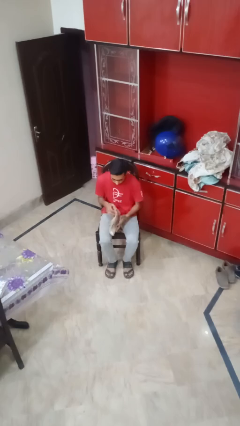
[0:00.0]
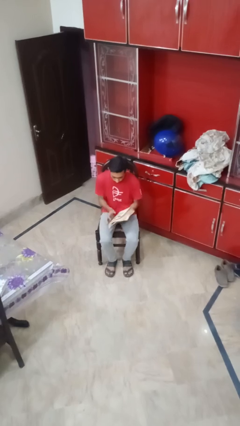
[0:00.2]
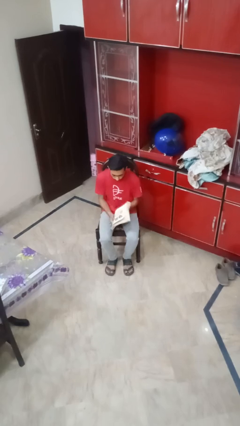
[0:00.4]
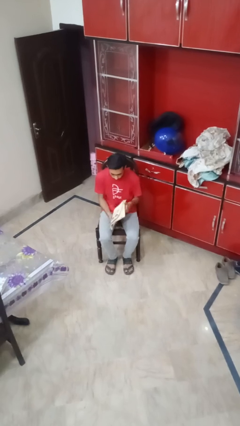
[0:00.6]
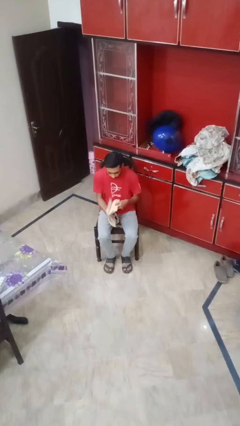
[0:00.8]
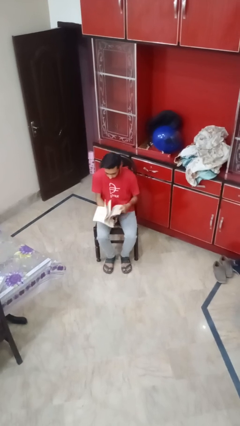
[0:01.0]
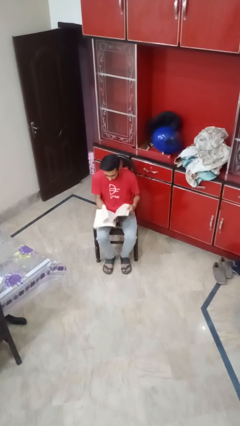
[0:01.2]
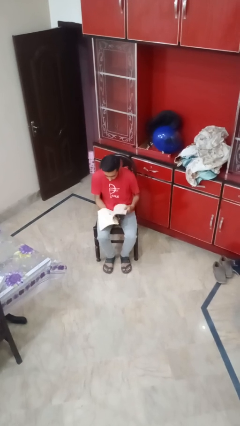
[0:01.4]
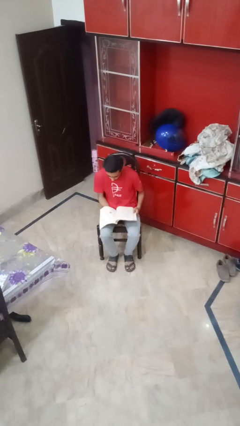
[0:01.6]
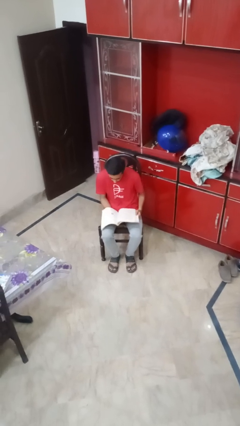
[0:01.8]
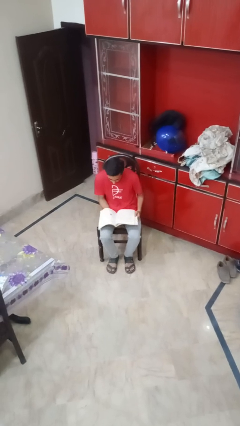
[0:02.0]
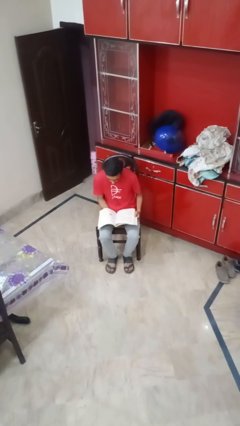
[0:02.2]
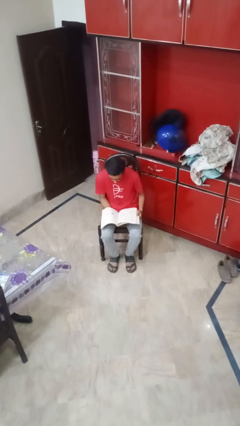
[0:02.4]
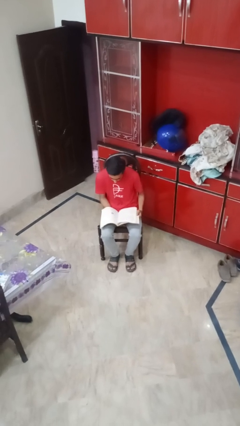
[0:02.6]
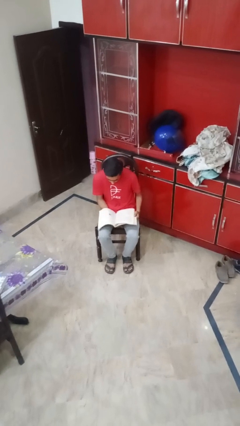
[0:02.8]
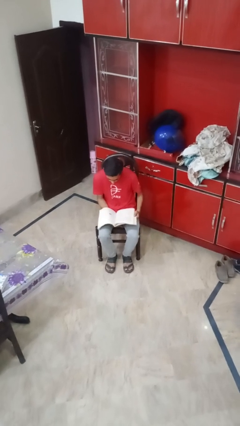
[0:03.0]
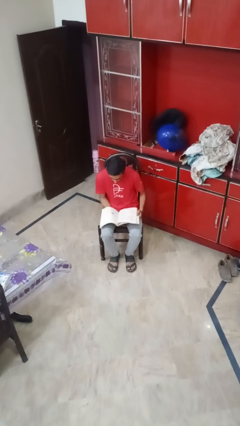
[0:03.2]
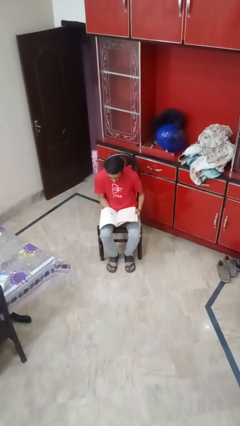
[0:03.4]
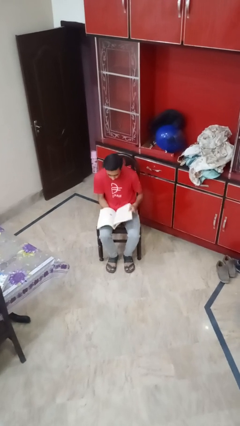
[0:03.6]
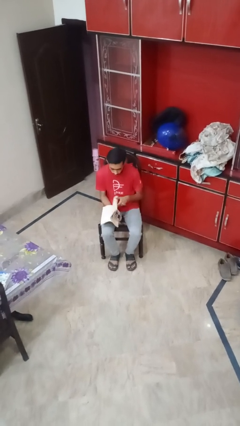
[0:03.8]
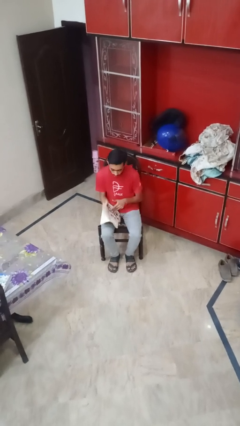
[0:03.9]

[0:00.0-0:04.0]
person reads magazine

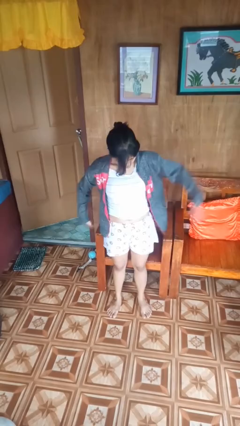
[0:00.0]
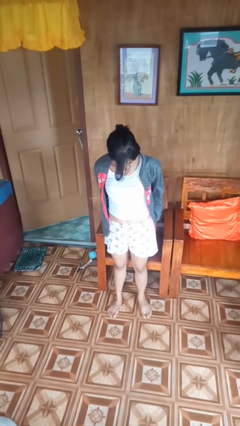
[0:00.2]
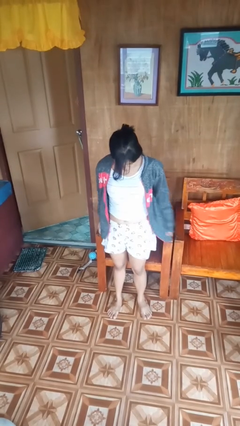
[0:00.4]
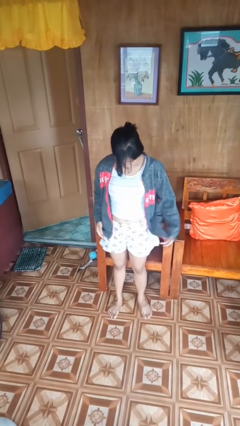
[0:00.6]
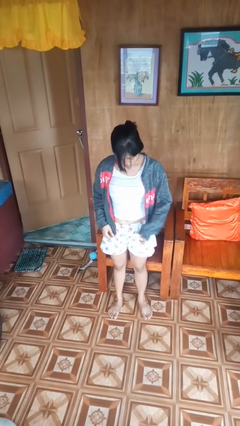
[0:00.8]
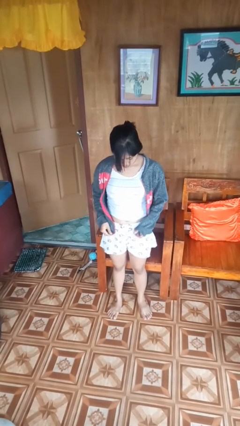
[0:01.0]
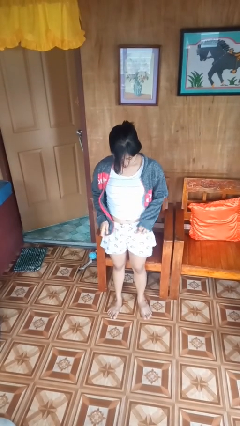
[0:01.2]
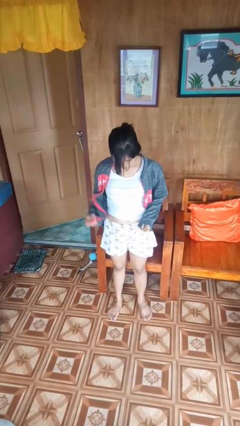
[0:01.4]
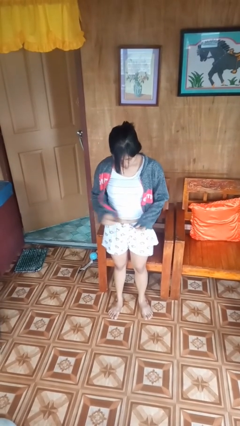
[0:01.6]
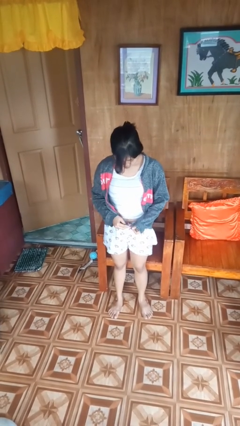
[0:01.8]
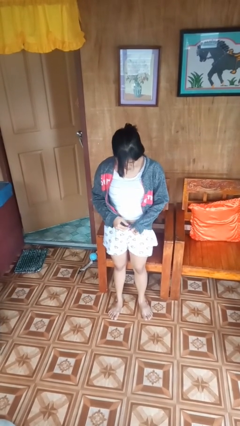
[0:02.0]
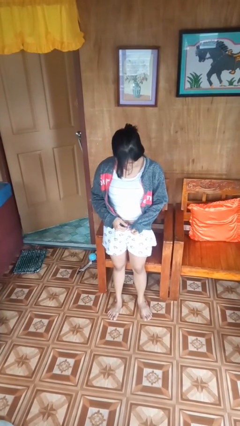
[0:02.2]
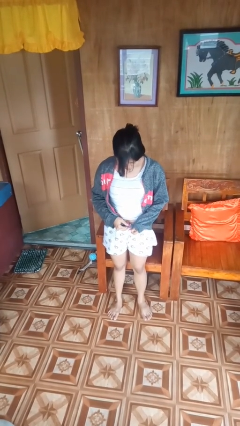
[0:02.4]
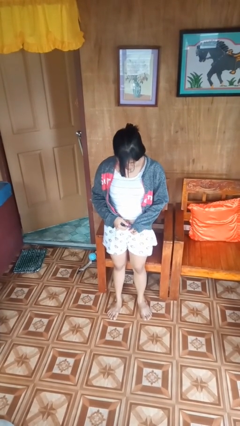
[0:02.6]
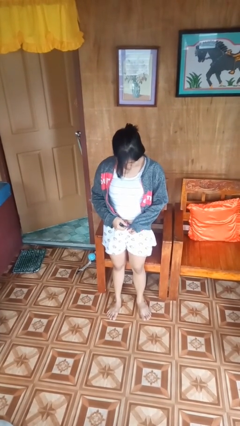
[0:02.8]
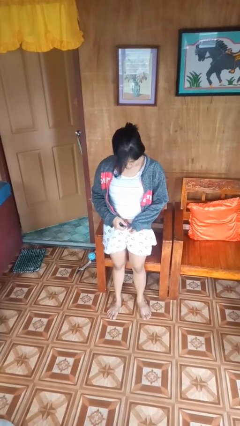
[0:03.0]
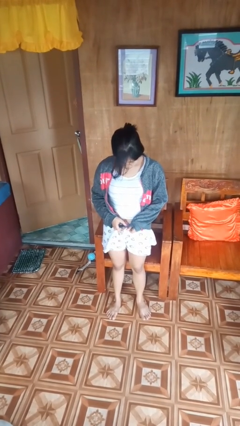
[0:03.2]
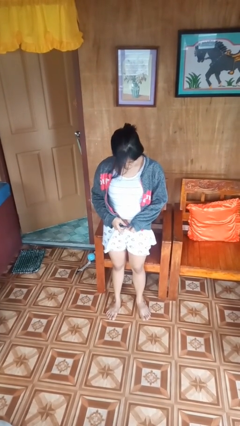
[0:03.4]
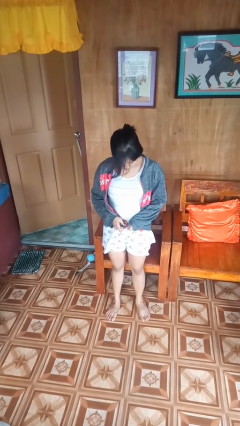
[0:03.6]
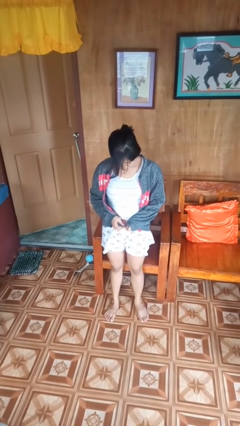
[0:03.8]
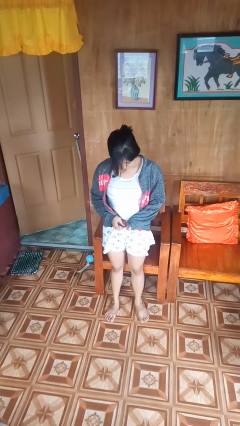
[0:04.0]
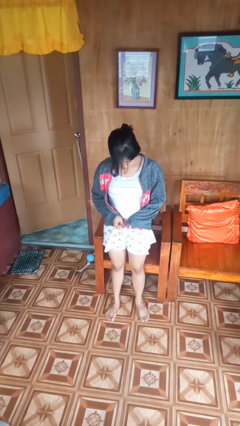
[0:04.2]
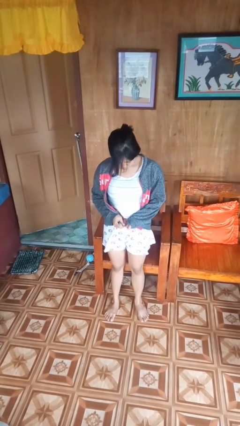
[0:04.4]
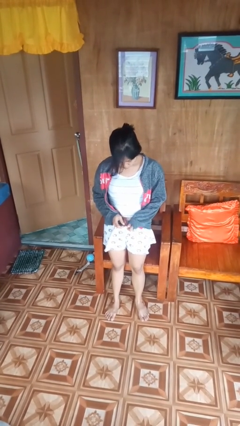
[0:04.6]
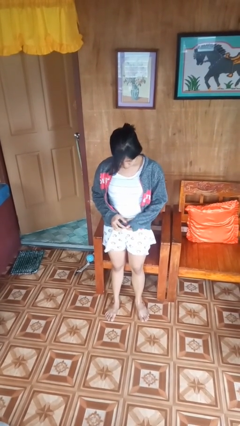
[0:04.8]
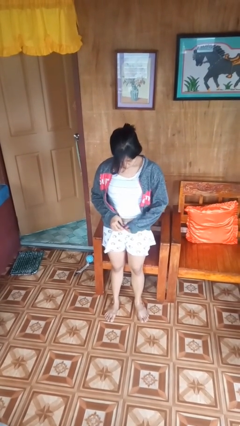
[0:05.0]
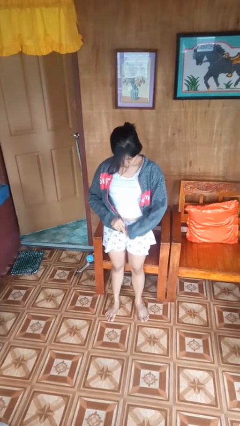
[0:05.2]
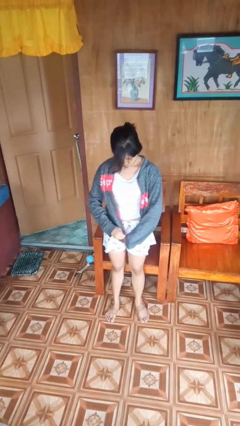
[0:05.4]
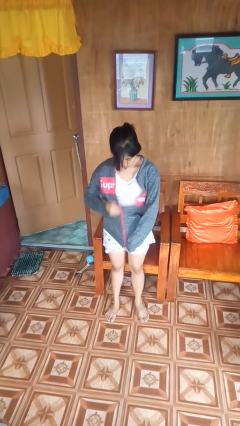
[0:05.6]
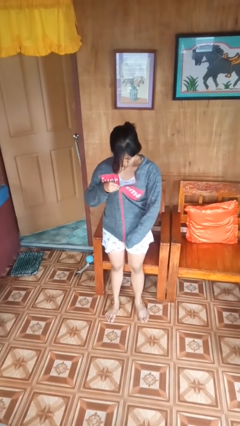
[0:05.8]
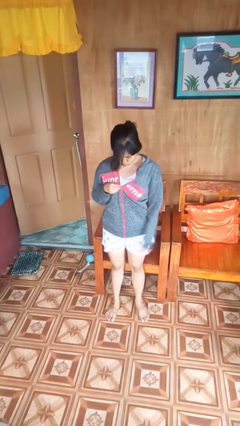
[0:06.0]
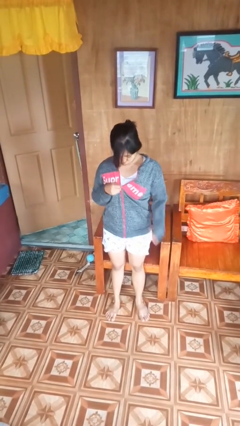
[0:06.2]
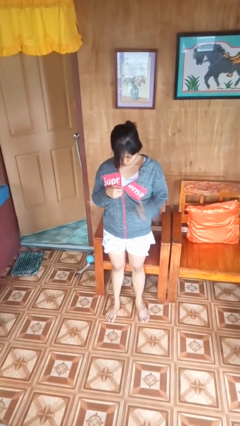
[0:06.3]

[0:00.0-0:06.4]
person zips up jacket

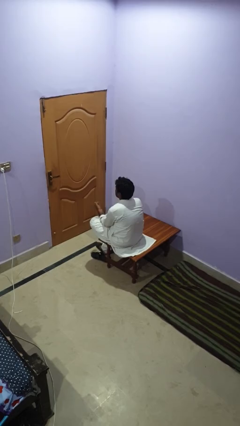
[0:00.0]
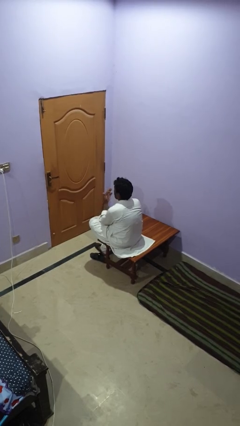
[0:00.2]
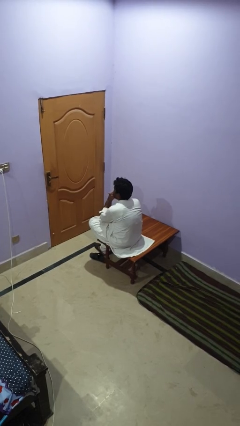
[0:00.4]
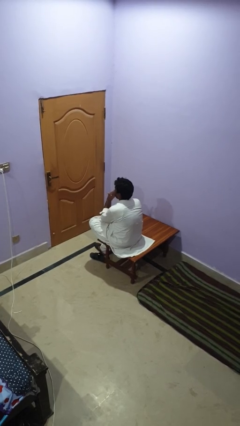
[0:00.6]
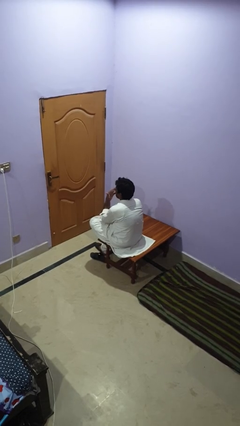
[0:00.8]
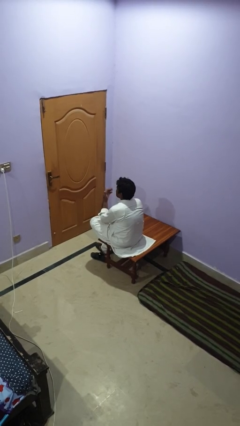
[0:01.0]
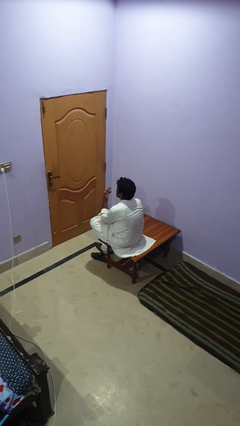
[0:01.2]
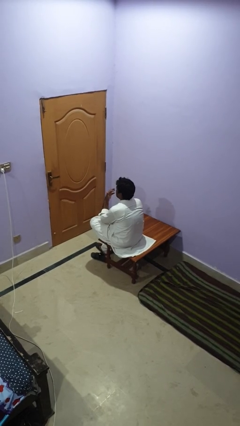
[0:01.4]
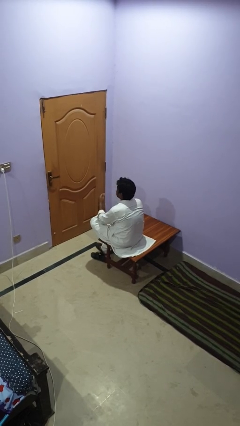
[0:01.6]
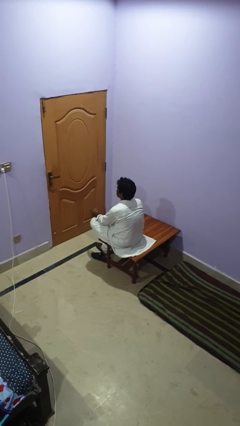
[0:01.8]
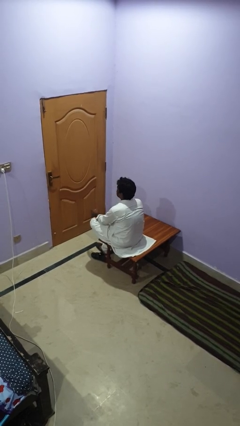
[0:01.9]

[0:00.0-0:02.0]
person licks fingers

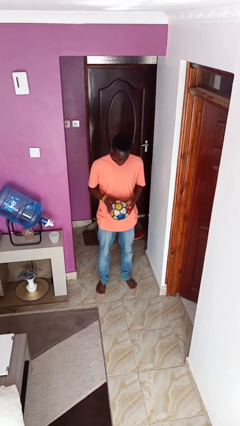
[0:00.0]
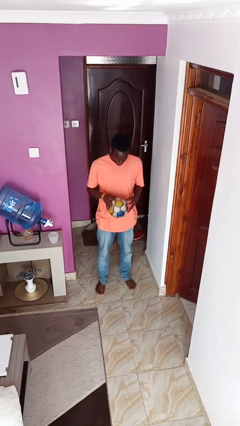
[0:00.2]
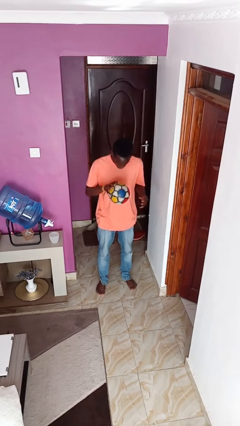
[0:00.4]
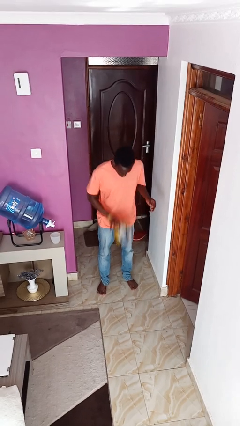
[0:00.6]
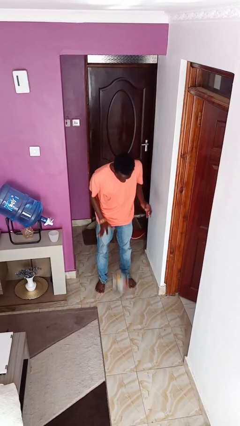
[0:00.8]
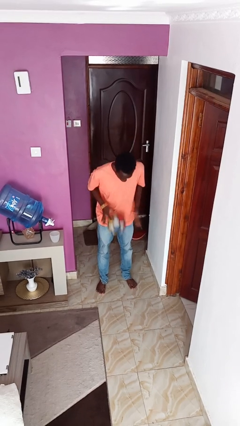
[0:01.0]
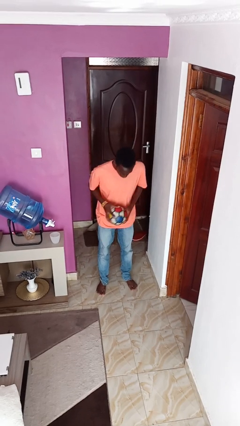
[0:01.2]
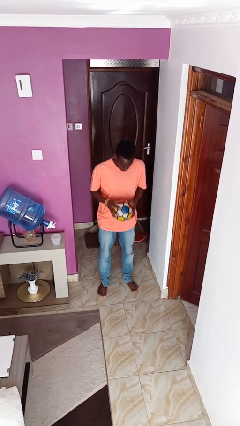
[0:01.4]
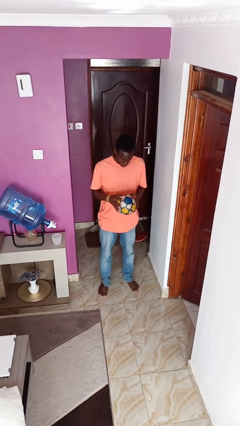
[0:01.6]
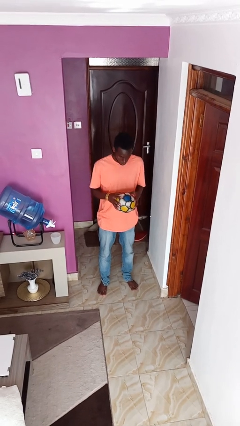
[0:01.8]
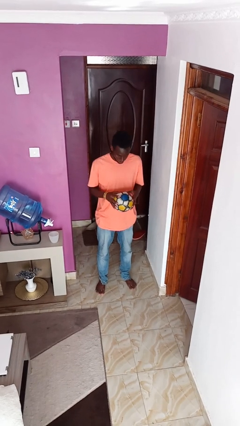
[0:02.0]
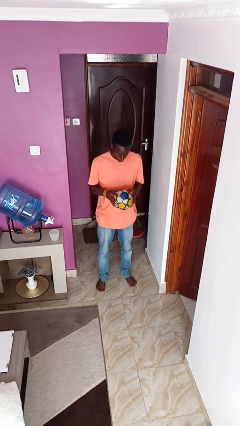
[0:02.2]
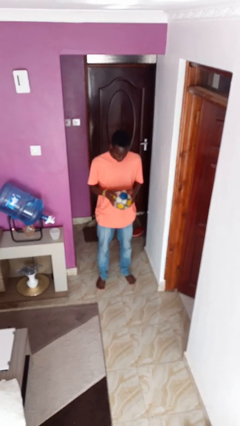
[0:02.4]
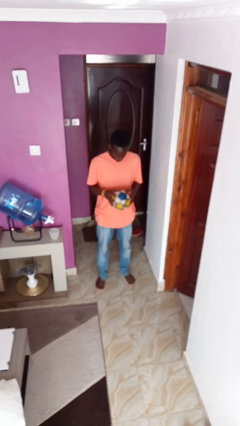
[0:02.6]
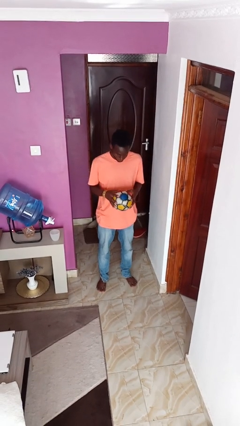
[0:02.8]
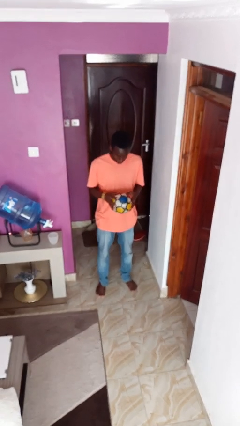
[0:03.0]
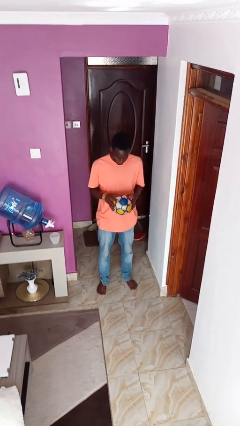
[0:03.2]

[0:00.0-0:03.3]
person bounces ball on floor

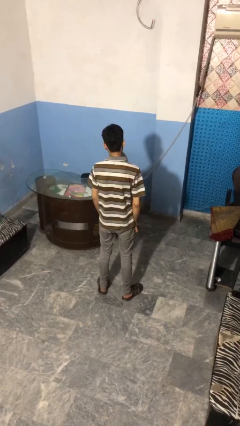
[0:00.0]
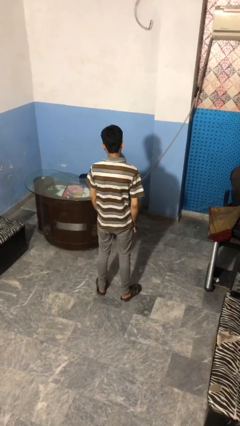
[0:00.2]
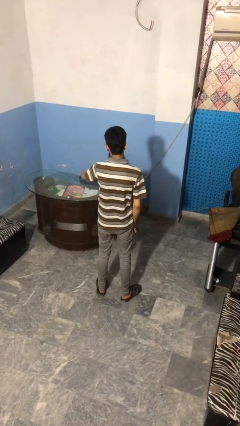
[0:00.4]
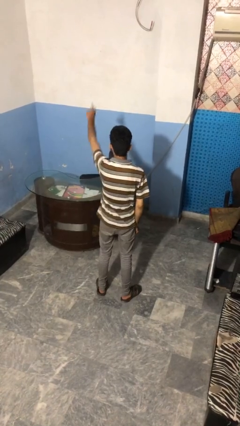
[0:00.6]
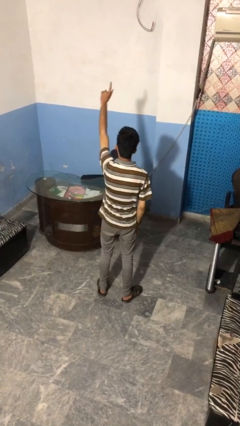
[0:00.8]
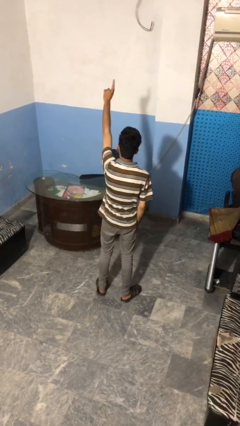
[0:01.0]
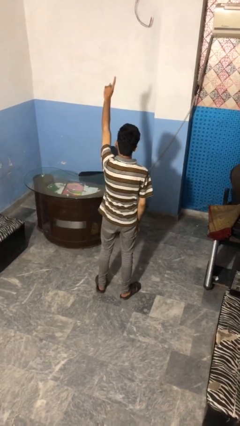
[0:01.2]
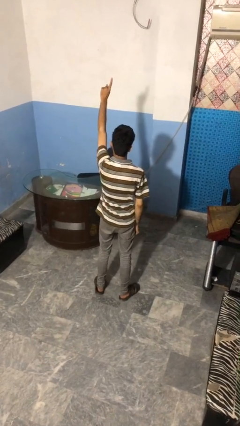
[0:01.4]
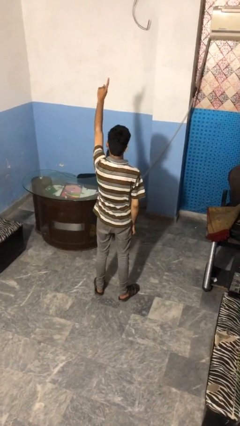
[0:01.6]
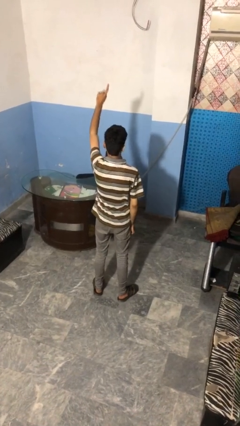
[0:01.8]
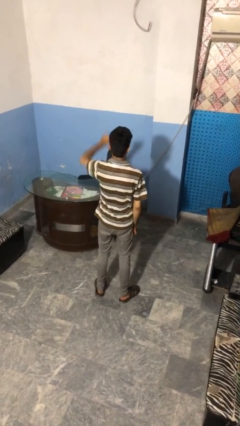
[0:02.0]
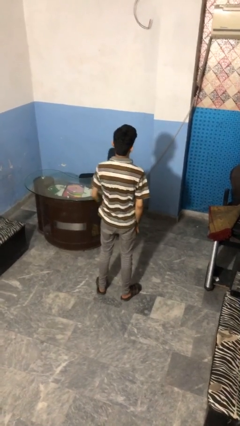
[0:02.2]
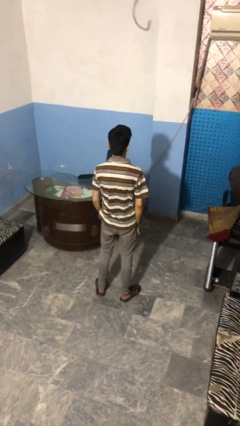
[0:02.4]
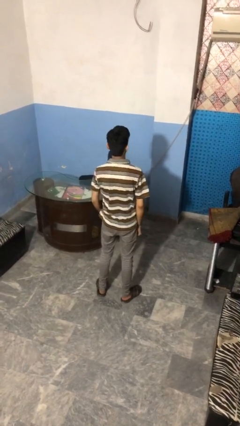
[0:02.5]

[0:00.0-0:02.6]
person gestures number one
